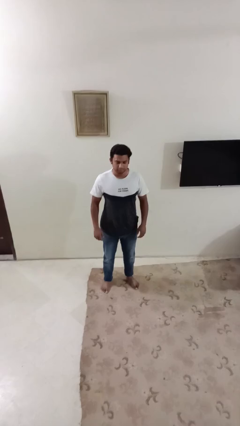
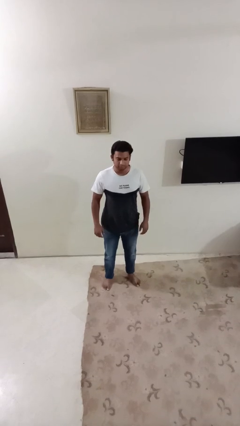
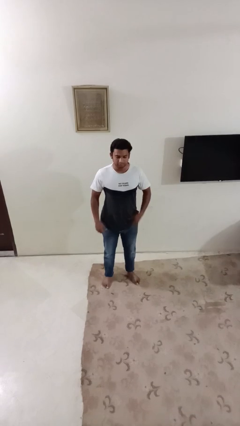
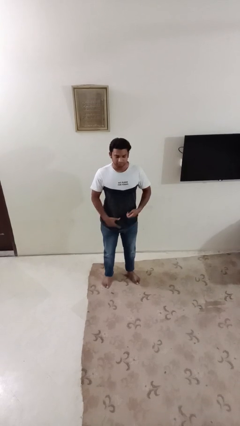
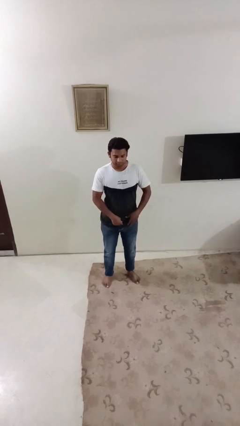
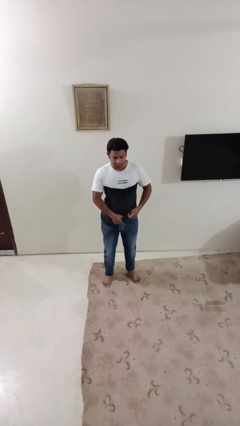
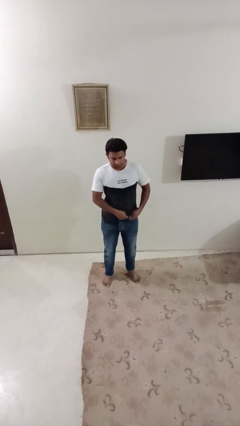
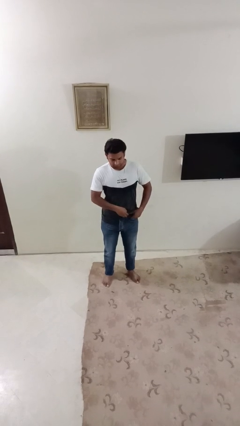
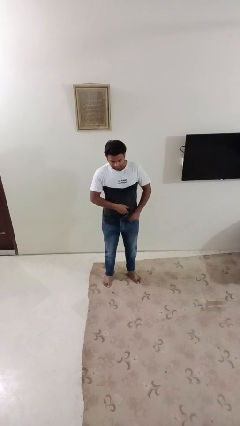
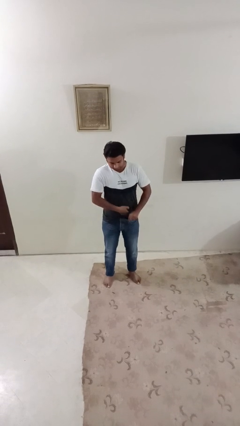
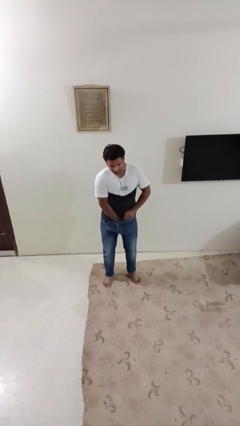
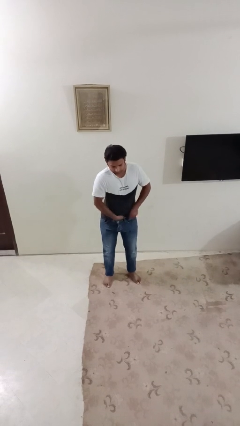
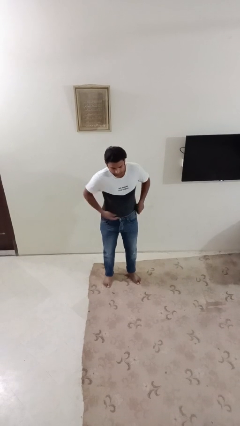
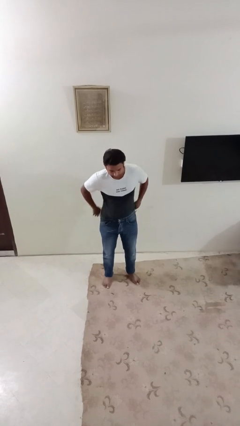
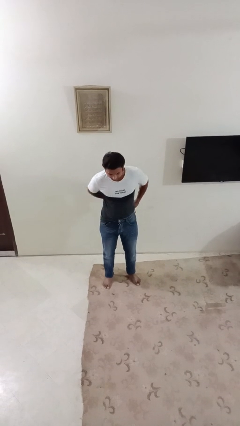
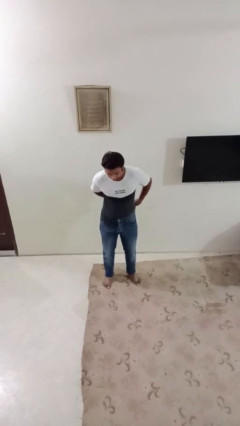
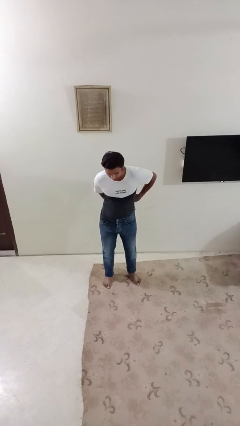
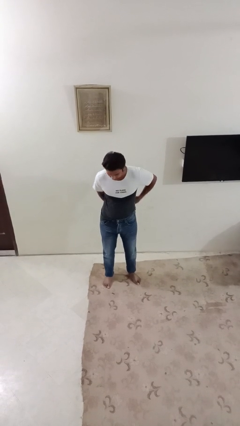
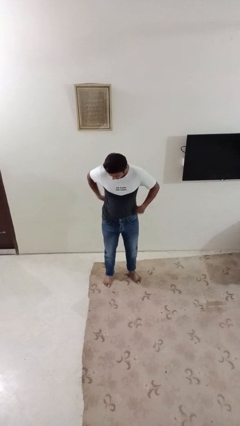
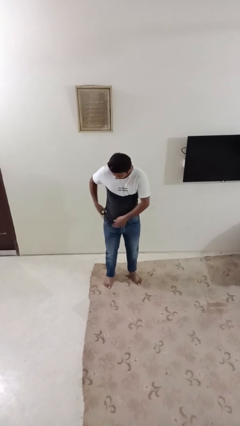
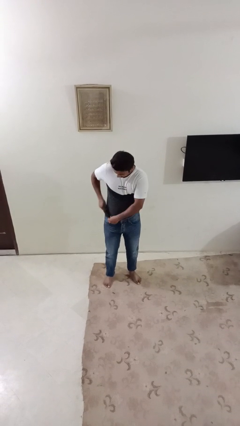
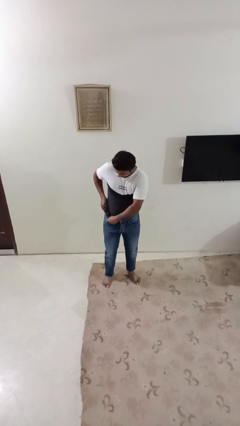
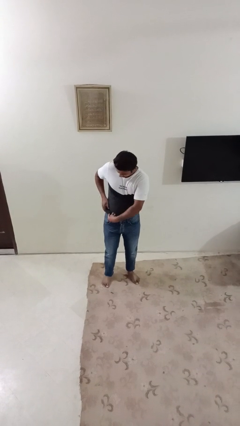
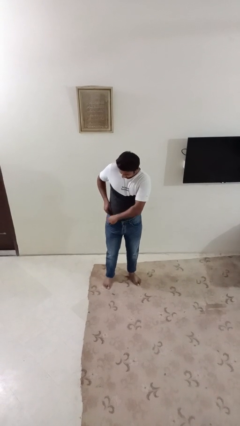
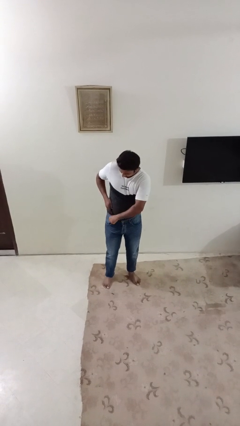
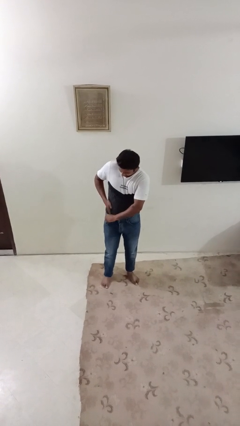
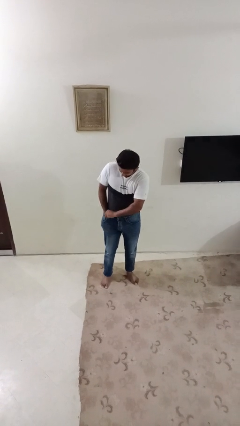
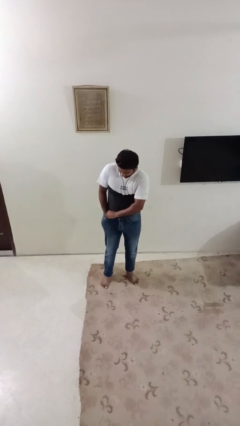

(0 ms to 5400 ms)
person tucks in shirt

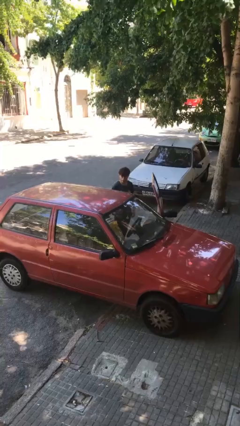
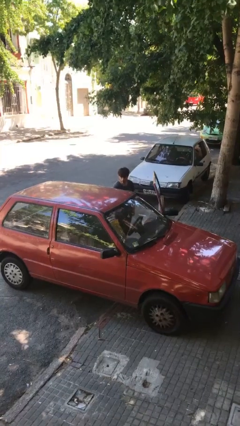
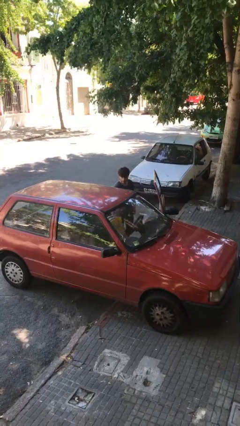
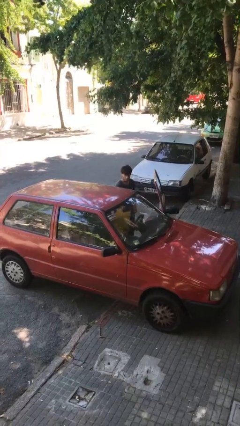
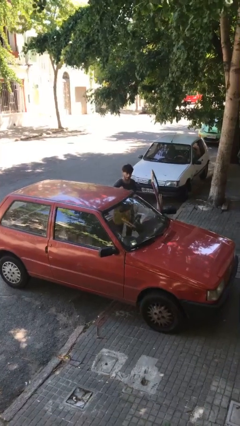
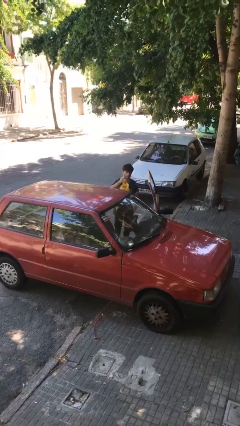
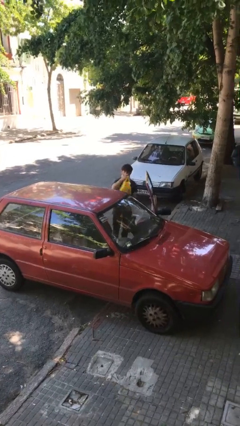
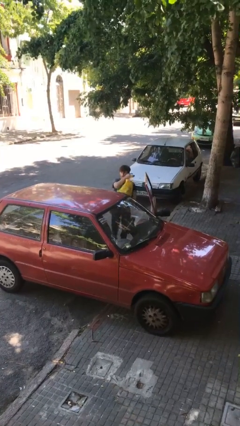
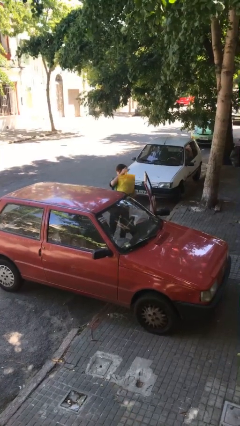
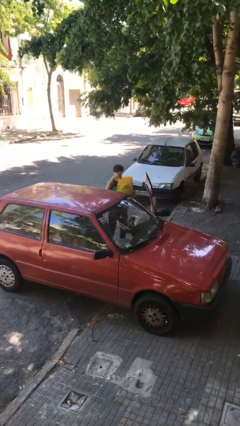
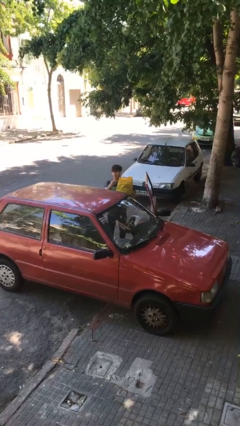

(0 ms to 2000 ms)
person unloads car

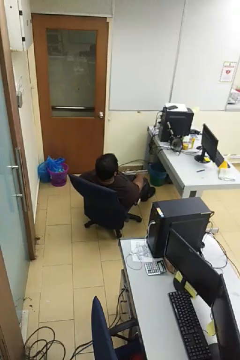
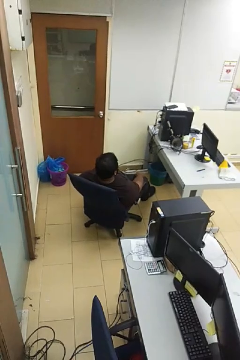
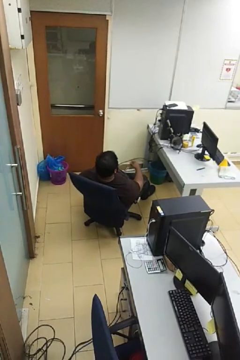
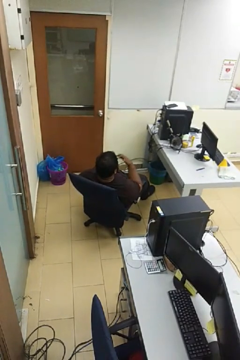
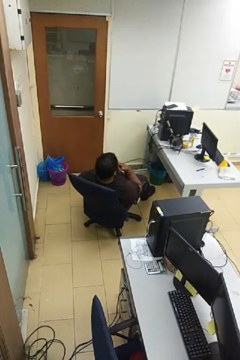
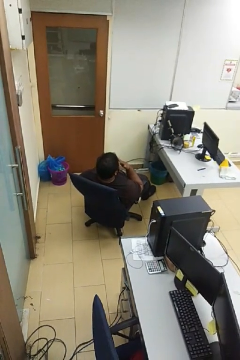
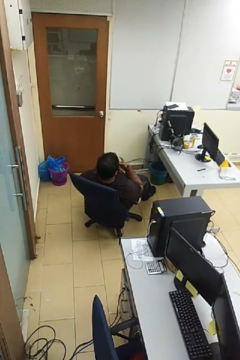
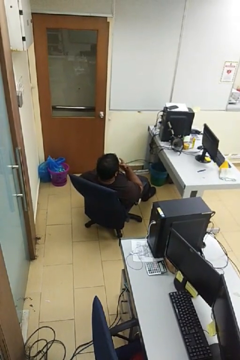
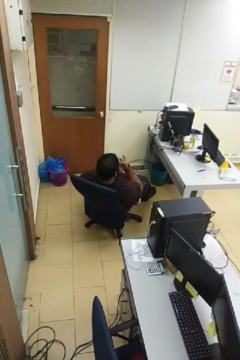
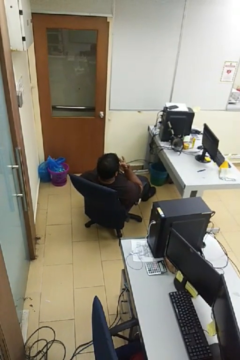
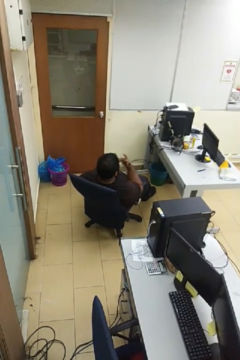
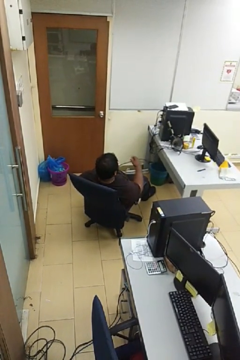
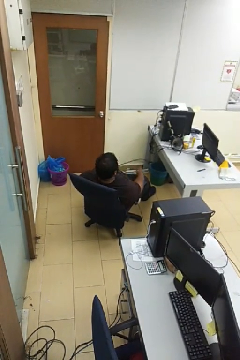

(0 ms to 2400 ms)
person licks fingers

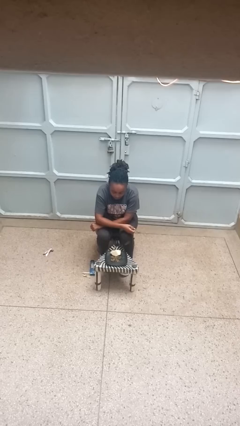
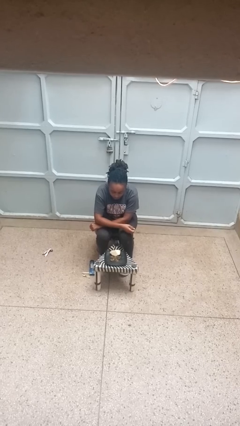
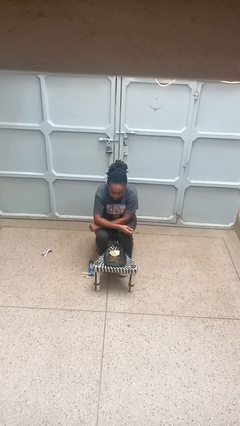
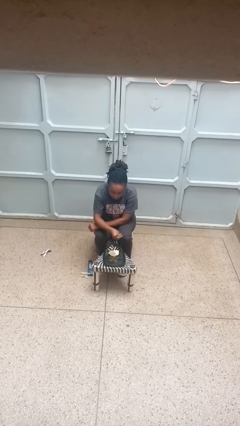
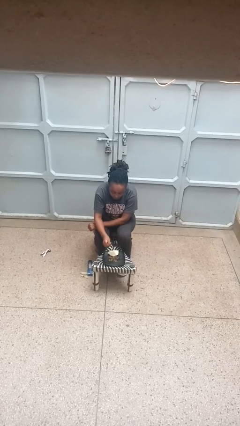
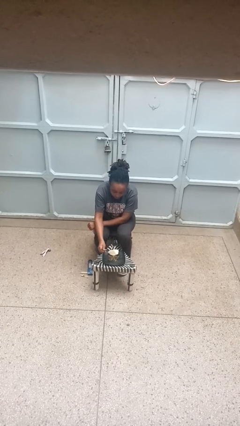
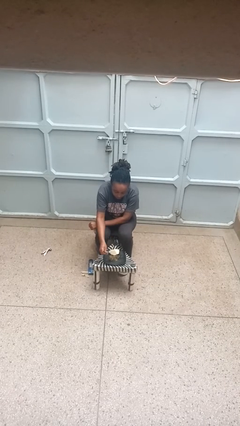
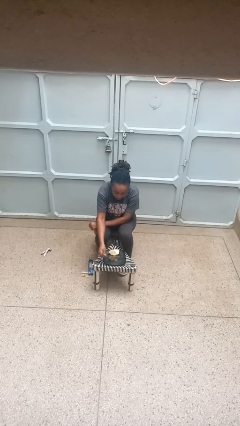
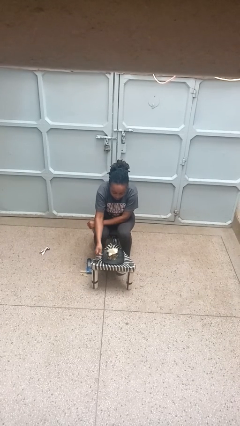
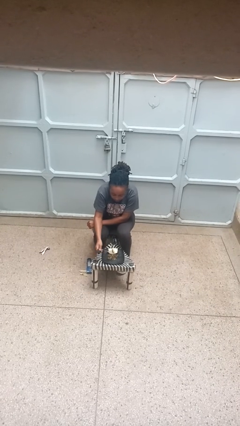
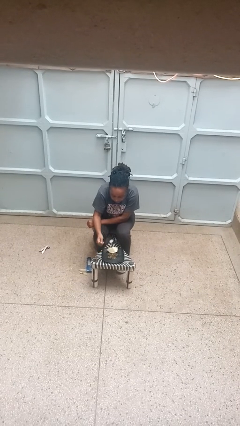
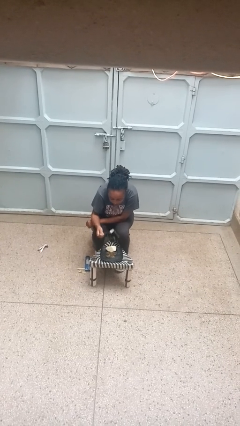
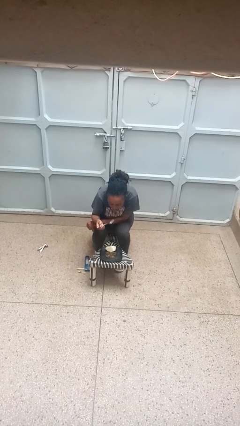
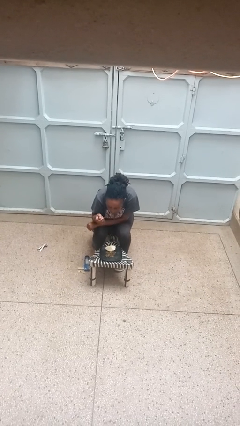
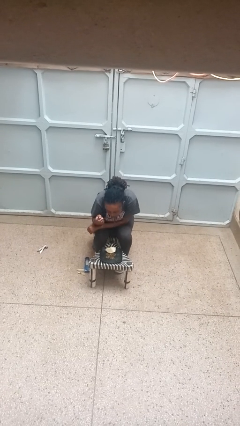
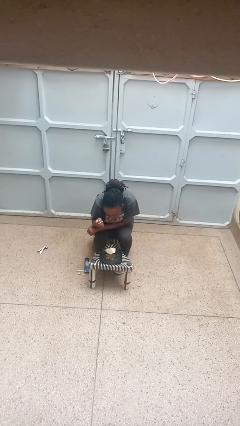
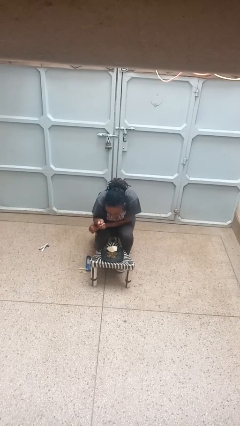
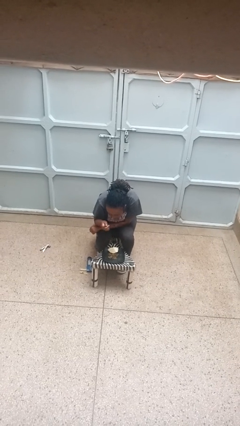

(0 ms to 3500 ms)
person eats with utensil

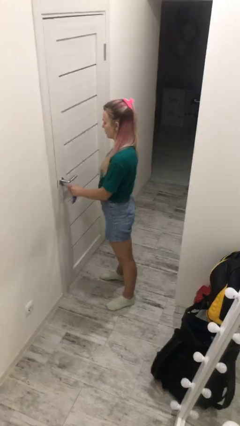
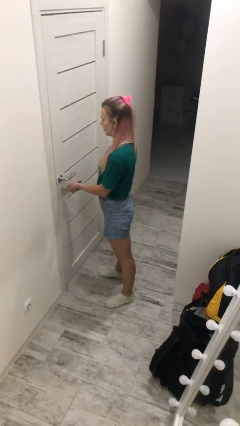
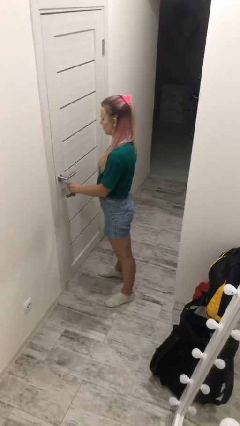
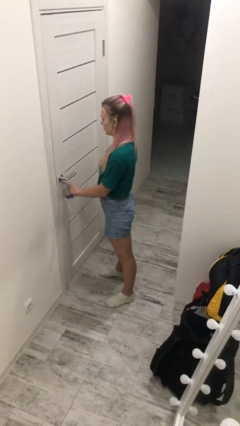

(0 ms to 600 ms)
person locks door with keys

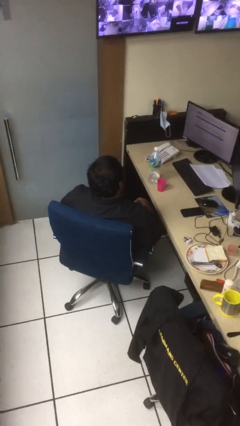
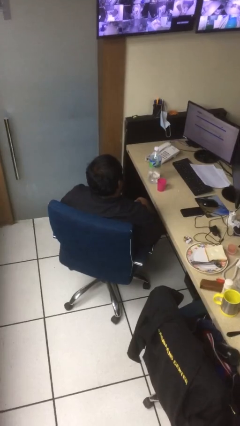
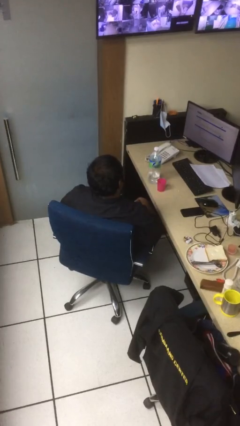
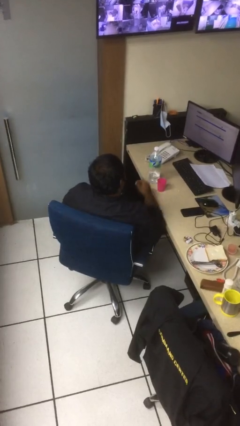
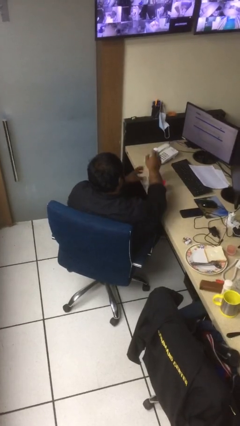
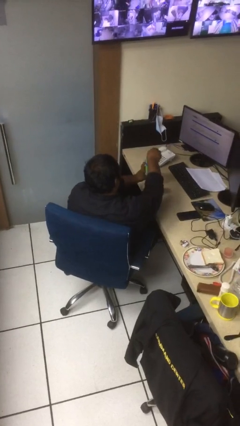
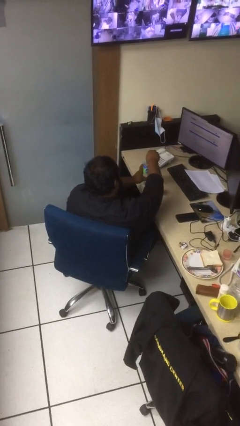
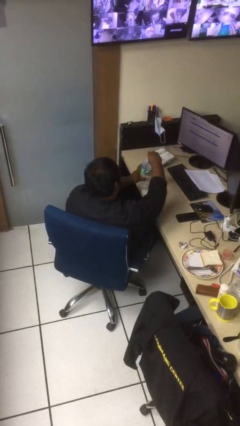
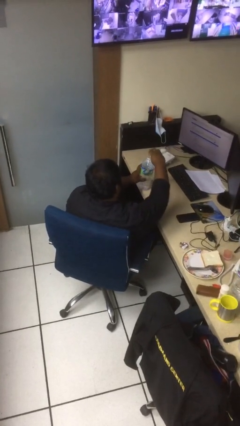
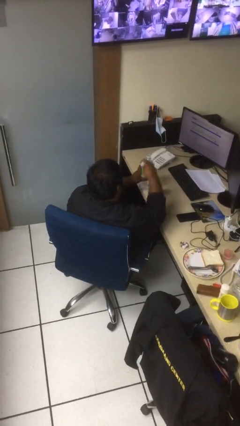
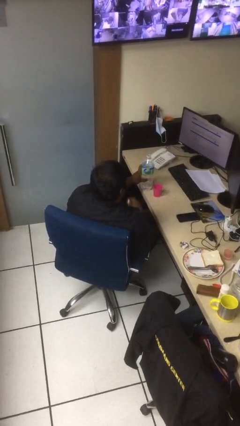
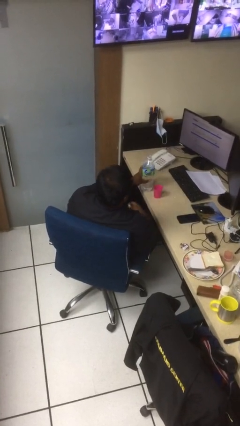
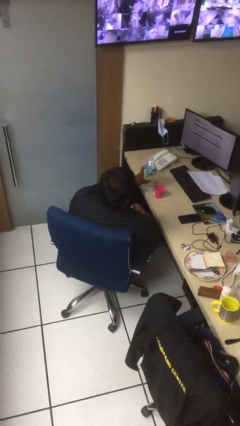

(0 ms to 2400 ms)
person unscrews lid from bottle

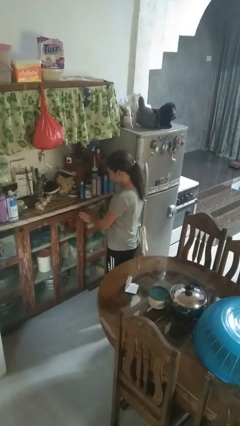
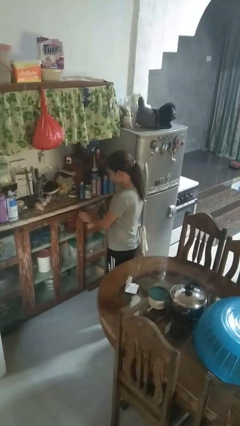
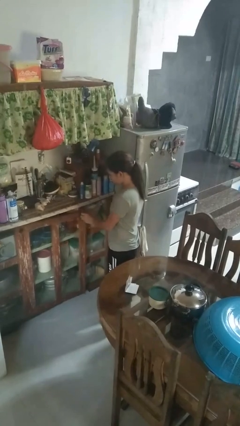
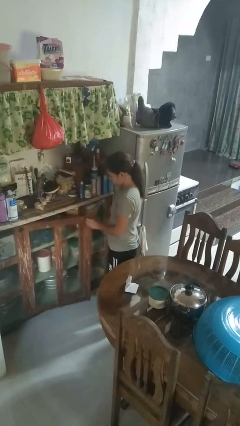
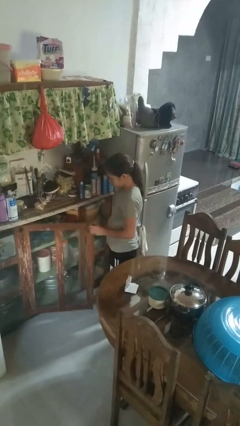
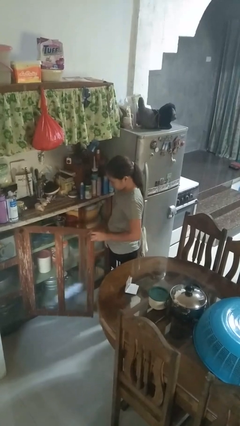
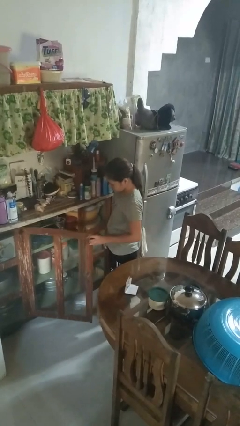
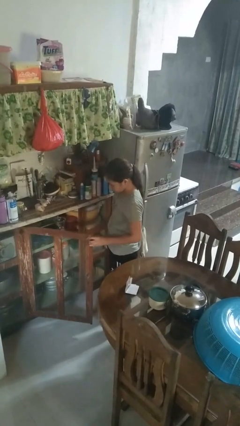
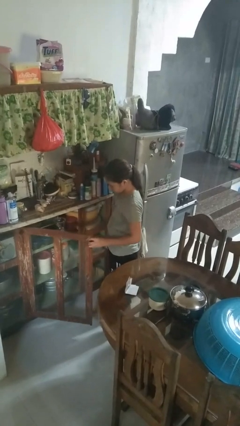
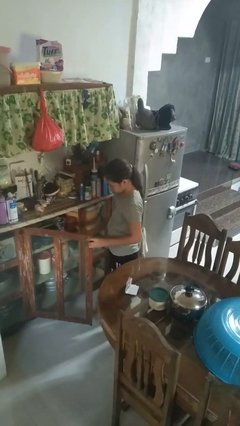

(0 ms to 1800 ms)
person opens cabinet
